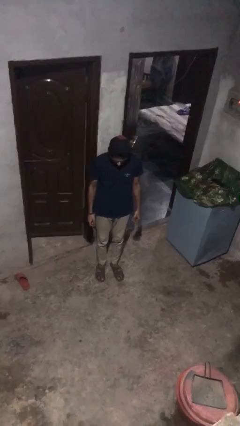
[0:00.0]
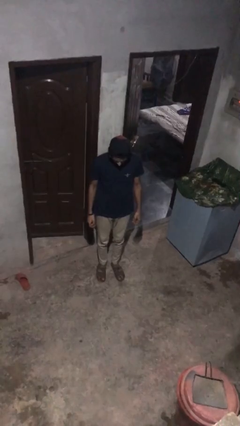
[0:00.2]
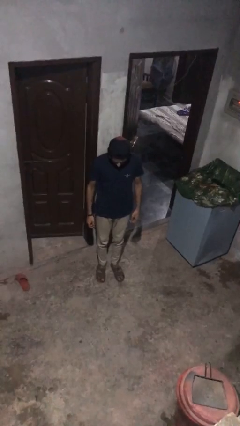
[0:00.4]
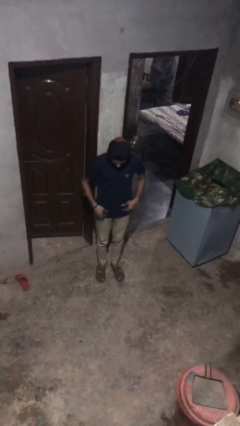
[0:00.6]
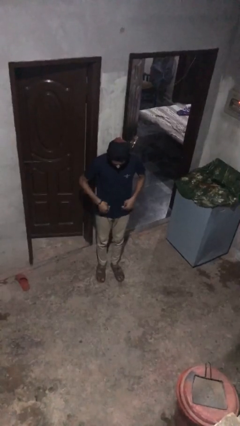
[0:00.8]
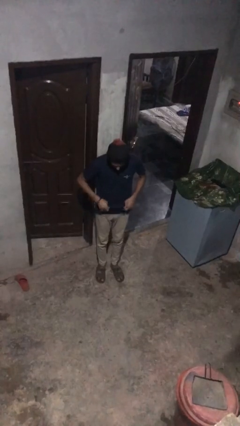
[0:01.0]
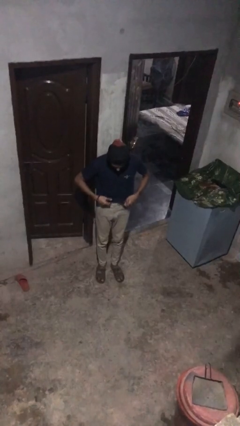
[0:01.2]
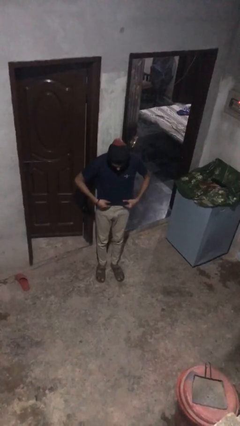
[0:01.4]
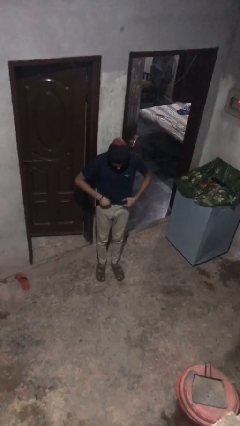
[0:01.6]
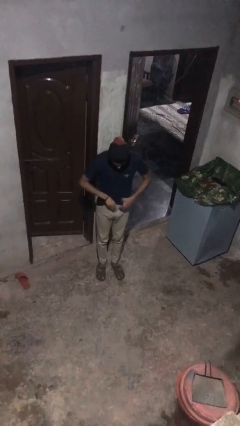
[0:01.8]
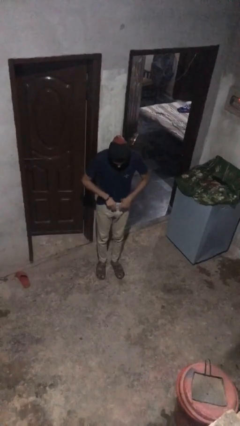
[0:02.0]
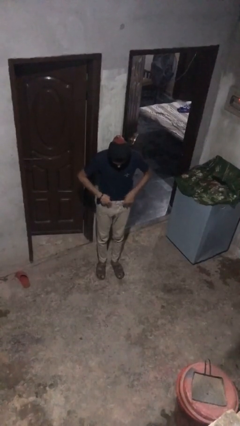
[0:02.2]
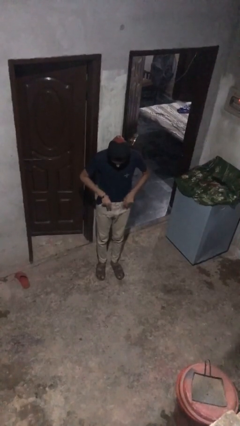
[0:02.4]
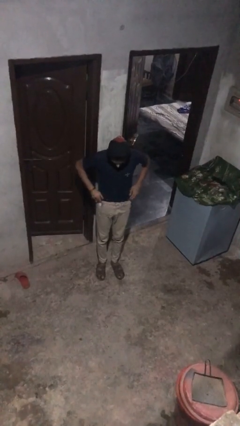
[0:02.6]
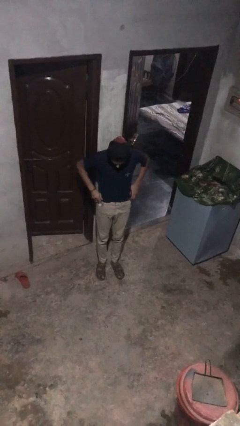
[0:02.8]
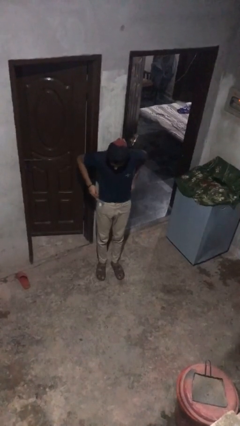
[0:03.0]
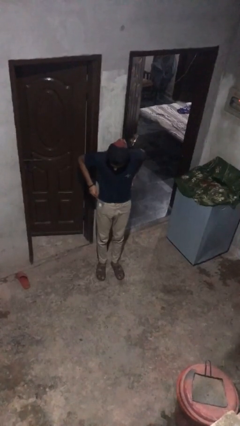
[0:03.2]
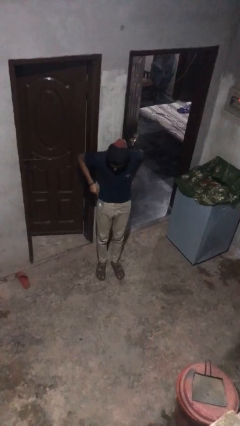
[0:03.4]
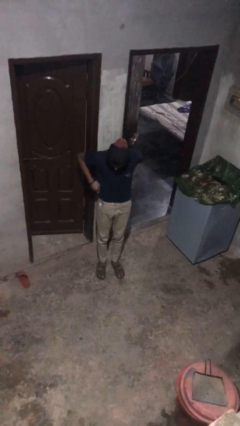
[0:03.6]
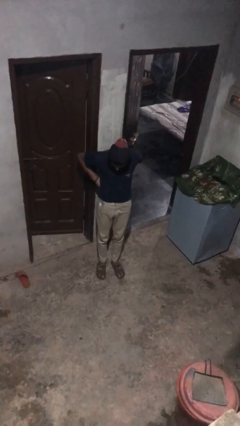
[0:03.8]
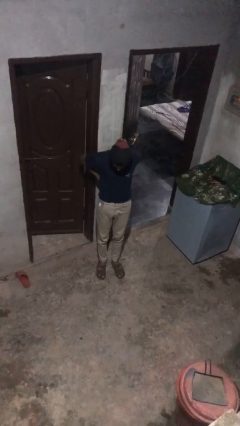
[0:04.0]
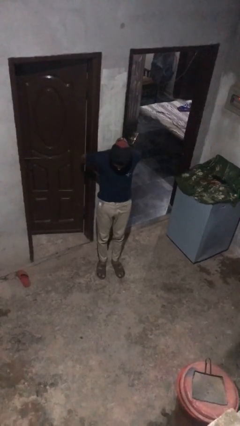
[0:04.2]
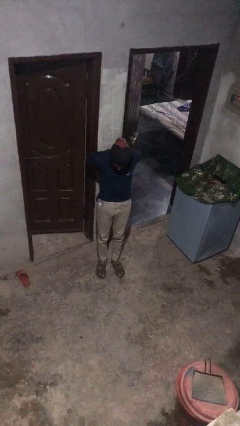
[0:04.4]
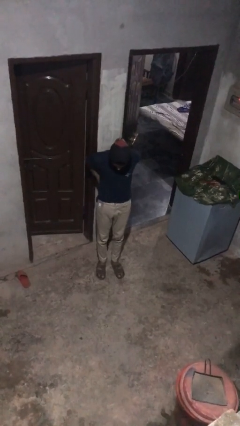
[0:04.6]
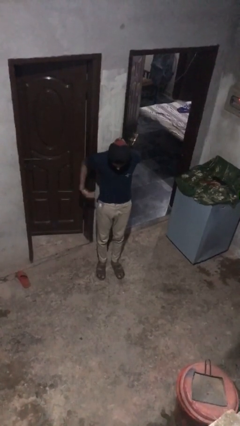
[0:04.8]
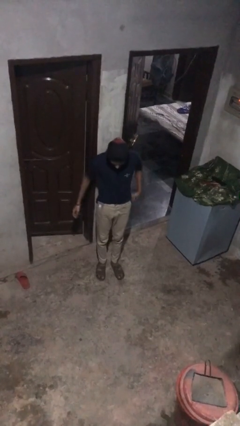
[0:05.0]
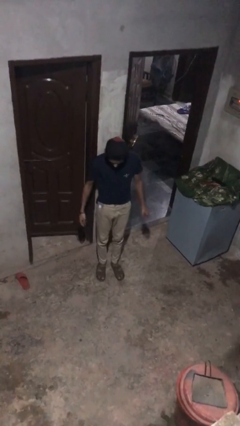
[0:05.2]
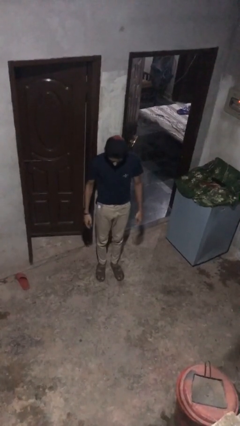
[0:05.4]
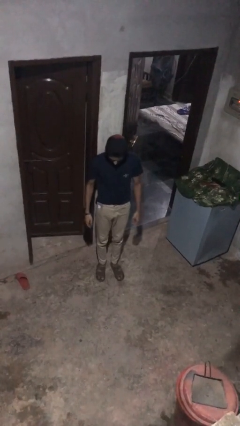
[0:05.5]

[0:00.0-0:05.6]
person tucks in shirt

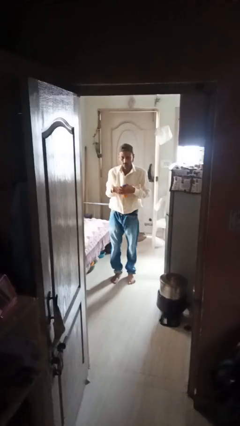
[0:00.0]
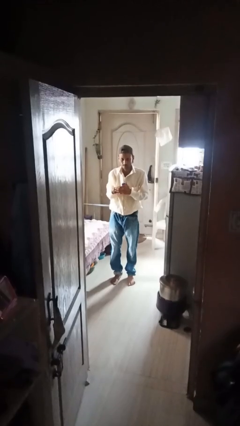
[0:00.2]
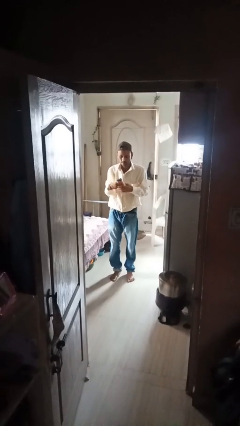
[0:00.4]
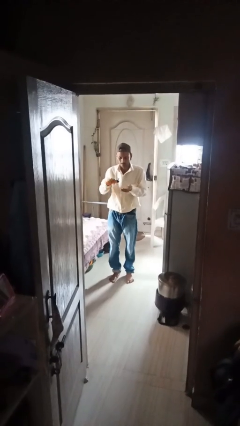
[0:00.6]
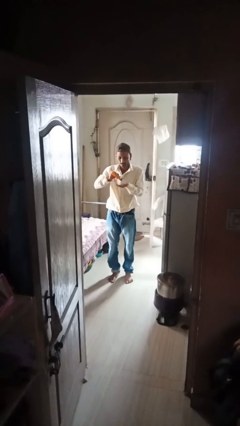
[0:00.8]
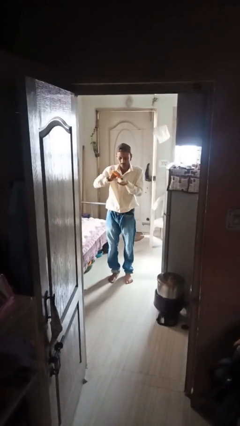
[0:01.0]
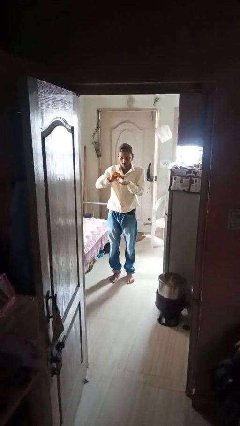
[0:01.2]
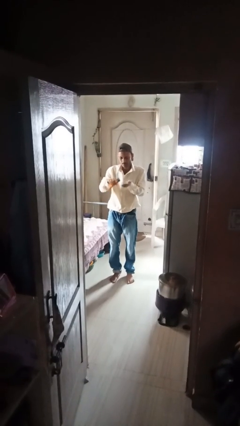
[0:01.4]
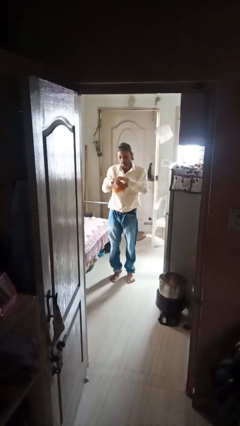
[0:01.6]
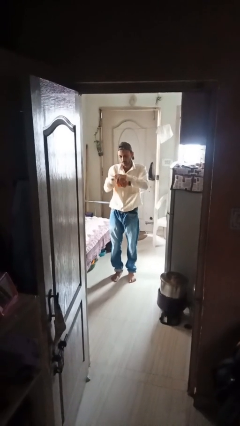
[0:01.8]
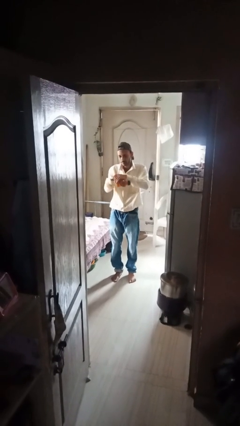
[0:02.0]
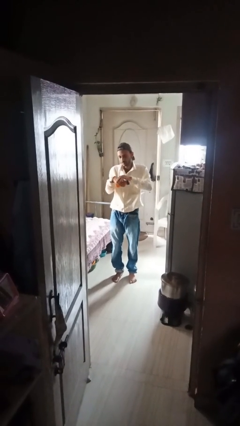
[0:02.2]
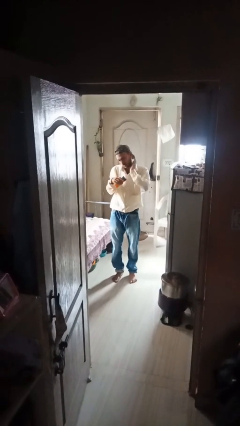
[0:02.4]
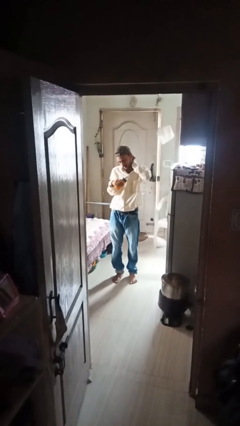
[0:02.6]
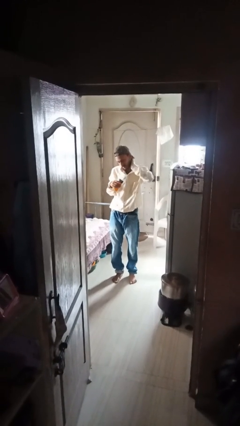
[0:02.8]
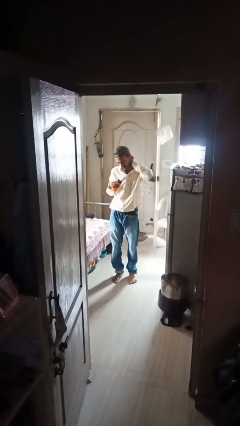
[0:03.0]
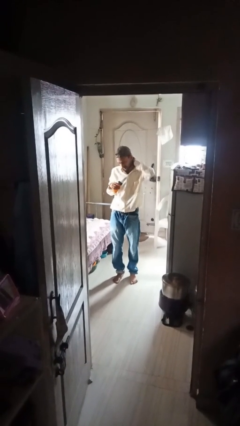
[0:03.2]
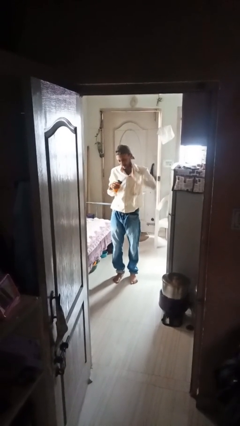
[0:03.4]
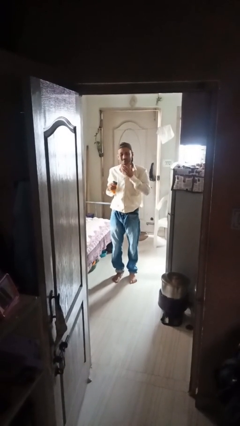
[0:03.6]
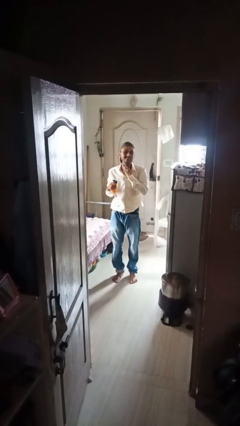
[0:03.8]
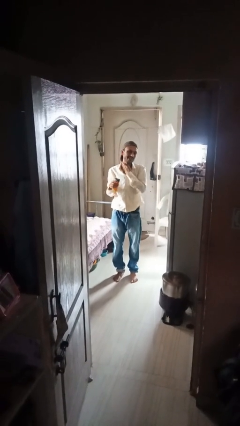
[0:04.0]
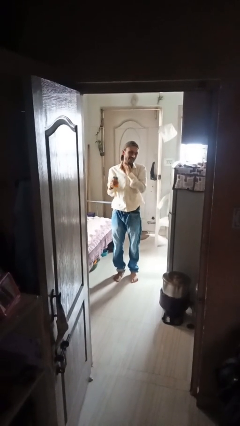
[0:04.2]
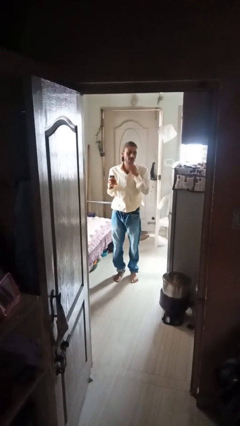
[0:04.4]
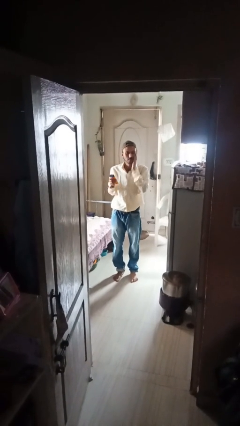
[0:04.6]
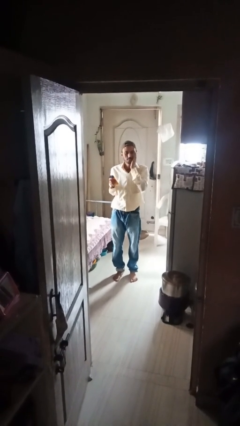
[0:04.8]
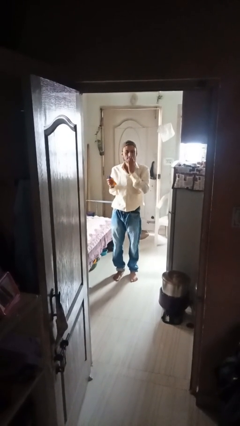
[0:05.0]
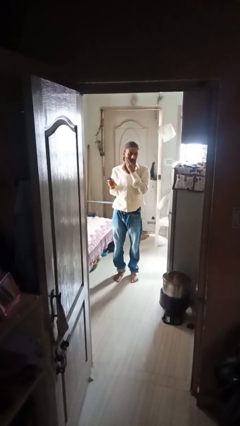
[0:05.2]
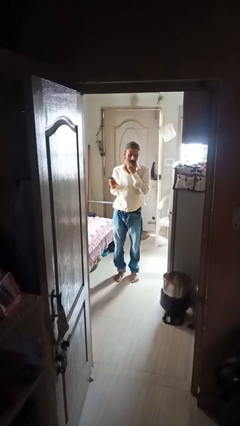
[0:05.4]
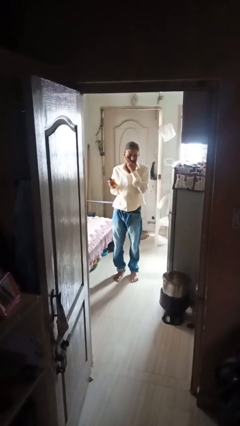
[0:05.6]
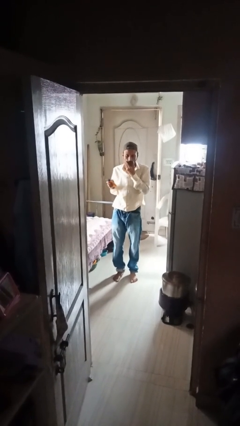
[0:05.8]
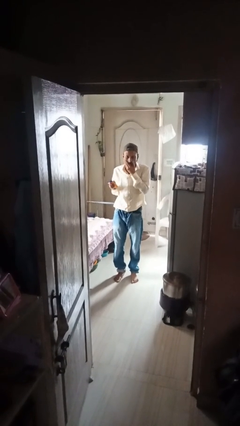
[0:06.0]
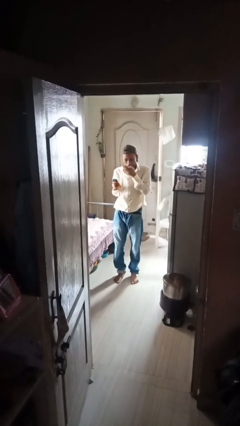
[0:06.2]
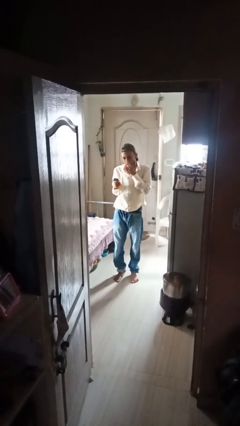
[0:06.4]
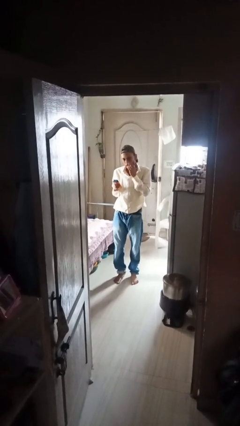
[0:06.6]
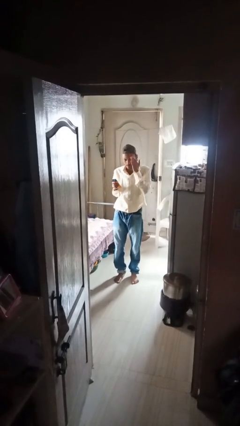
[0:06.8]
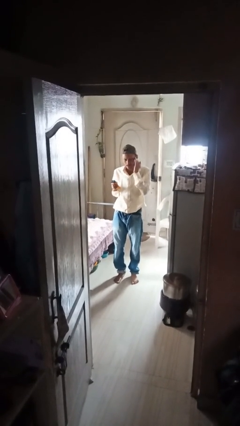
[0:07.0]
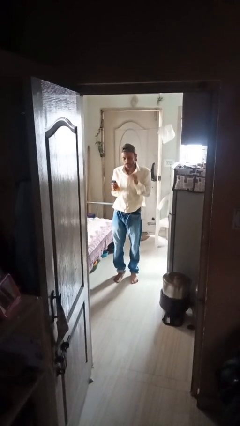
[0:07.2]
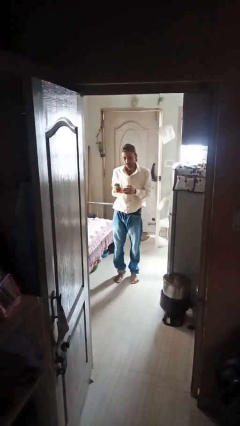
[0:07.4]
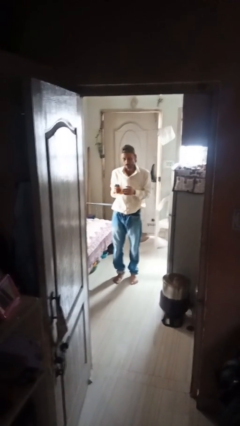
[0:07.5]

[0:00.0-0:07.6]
person applies sunscreen

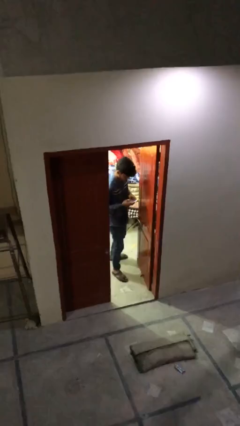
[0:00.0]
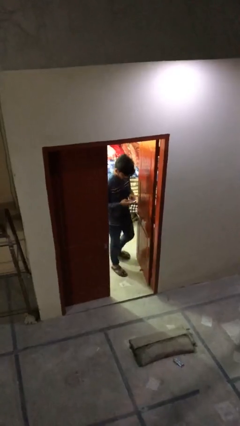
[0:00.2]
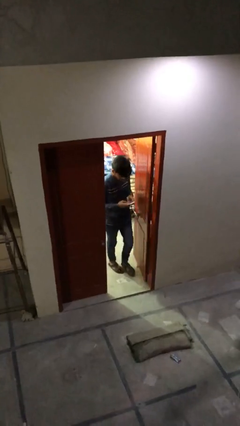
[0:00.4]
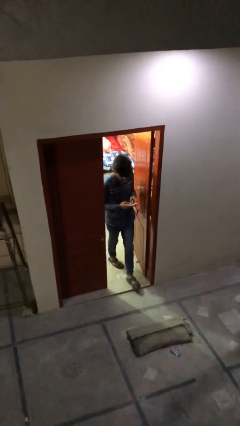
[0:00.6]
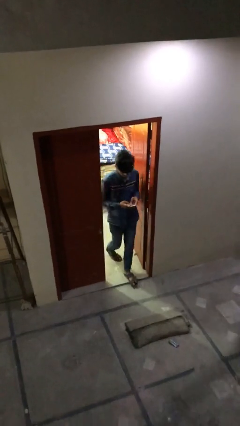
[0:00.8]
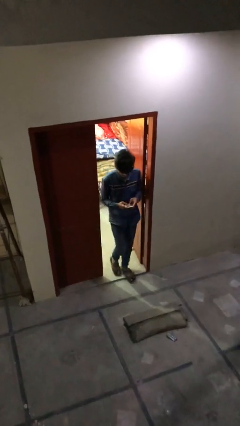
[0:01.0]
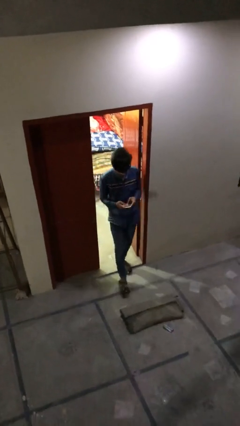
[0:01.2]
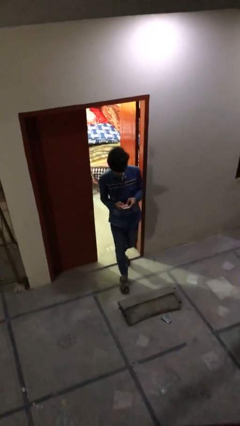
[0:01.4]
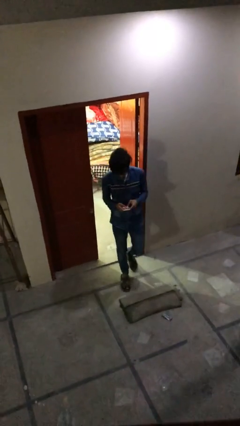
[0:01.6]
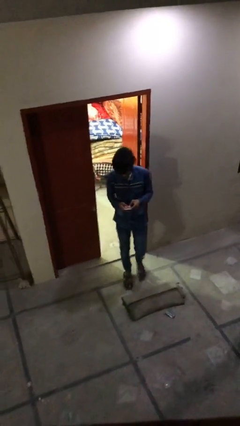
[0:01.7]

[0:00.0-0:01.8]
person enters scene through structure

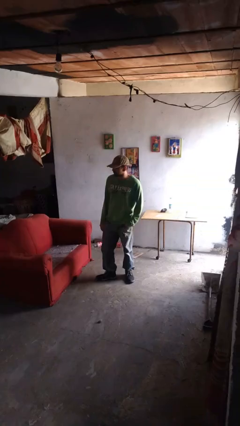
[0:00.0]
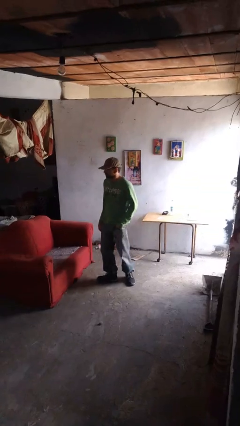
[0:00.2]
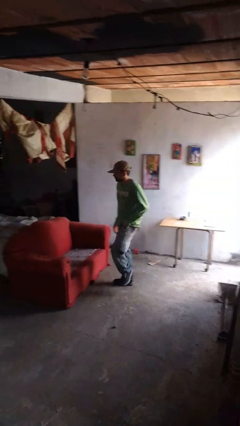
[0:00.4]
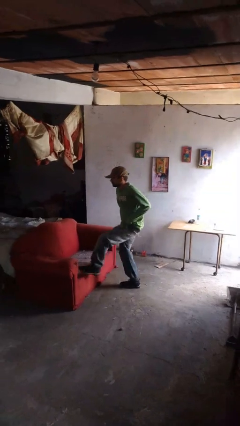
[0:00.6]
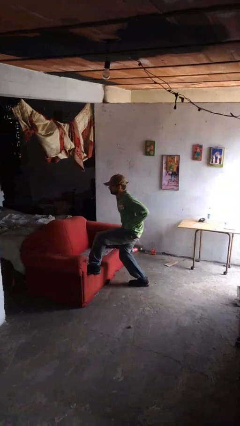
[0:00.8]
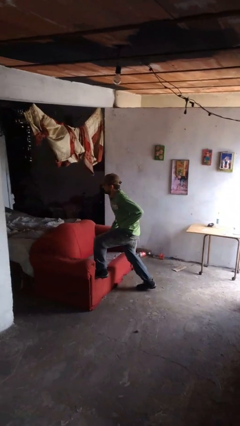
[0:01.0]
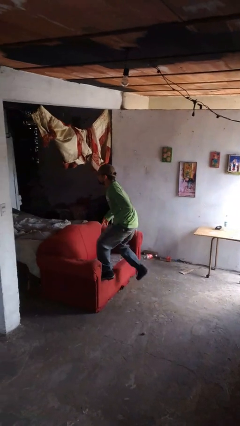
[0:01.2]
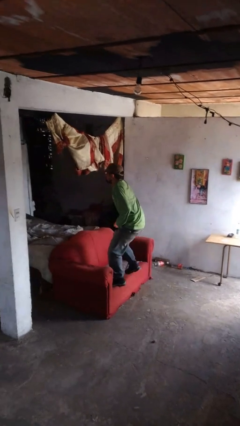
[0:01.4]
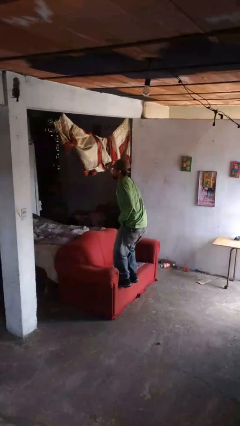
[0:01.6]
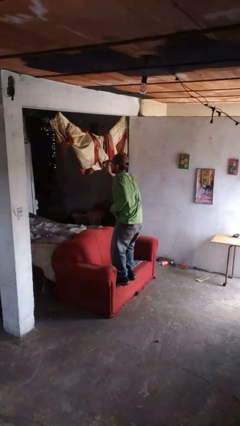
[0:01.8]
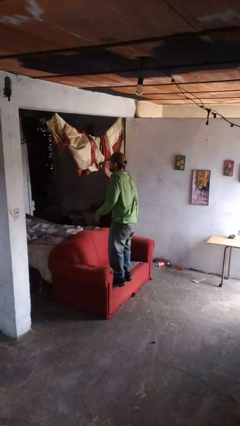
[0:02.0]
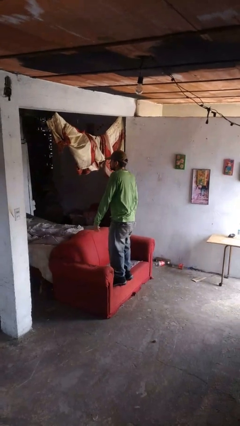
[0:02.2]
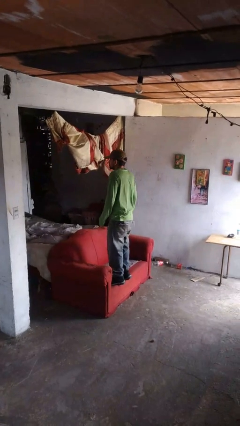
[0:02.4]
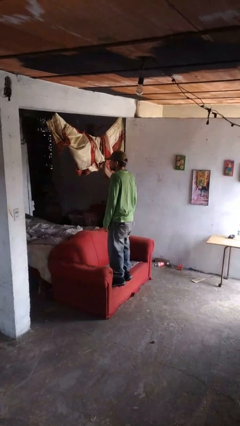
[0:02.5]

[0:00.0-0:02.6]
person climbs on couch

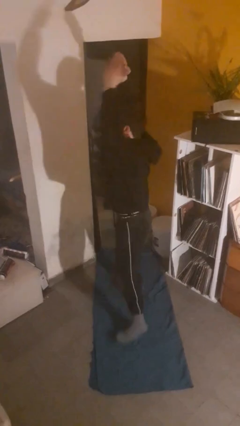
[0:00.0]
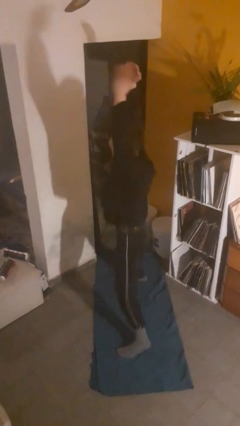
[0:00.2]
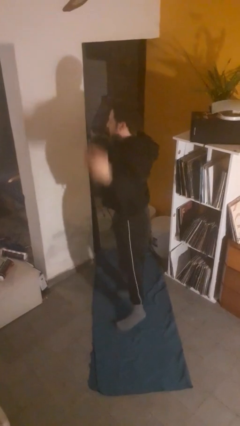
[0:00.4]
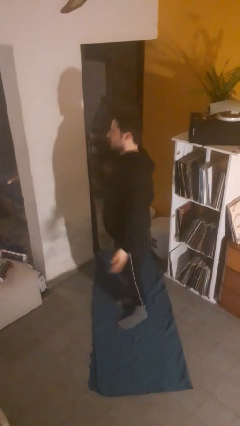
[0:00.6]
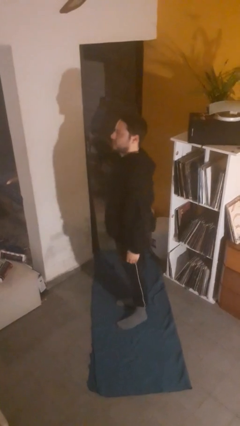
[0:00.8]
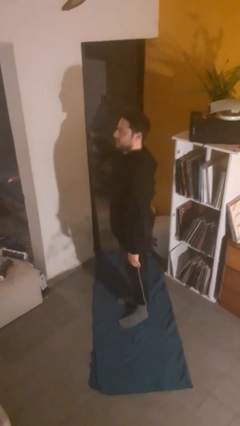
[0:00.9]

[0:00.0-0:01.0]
person exercises with jumping jacks
